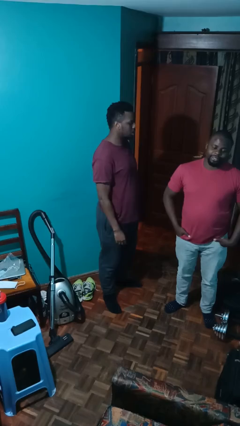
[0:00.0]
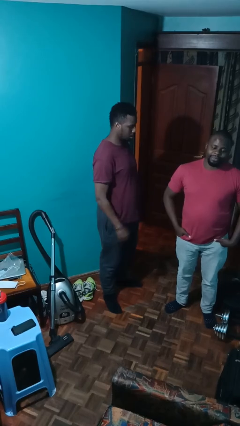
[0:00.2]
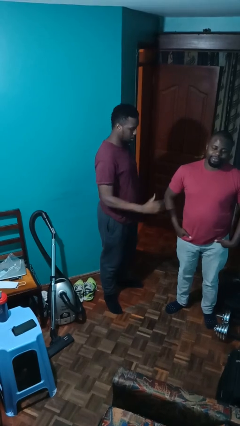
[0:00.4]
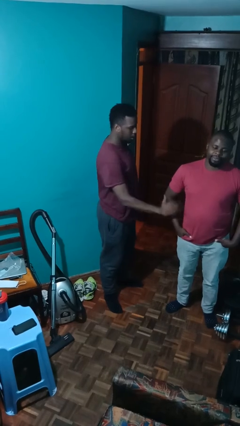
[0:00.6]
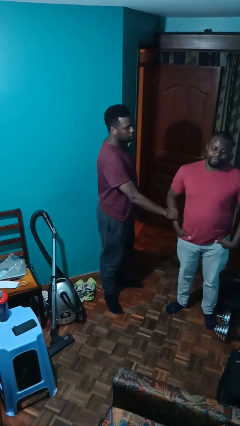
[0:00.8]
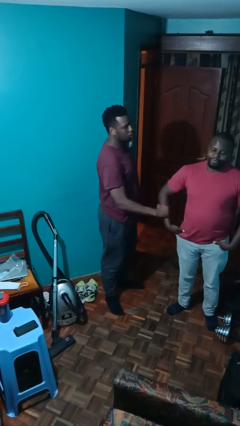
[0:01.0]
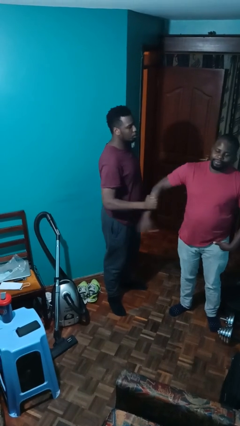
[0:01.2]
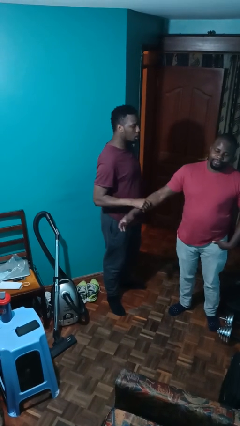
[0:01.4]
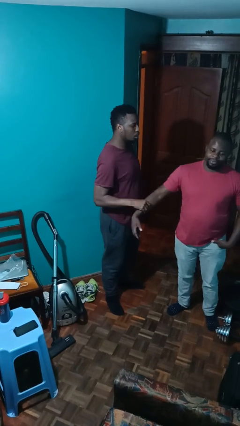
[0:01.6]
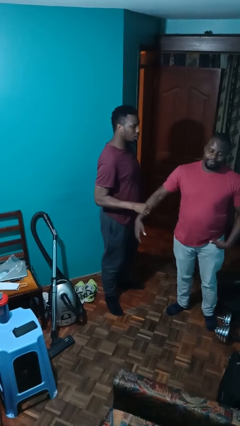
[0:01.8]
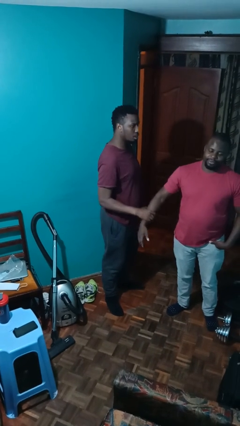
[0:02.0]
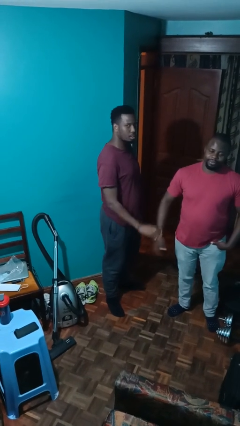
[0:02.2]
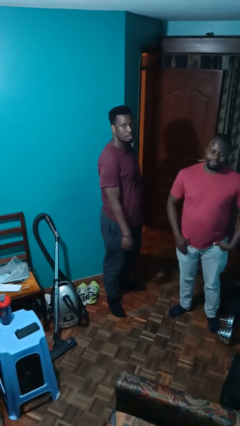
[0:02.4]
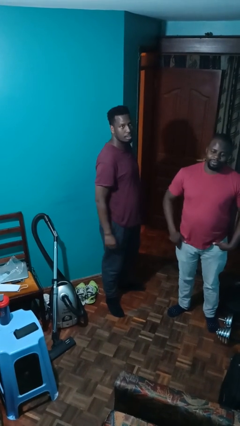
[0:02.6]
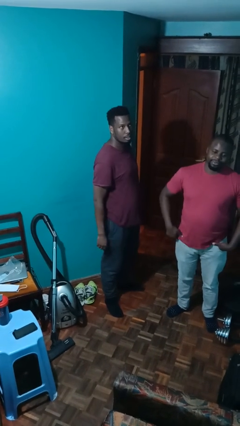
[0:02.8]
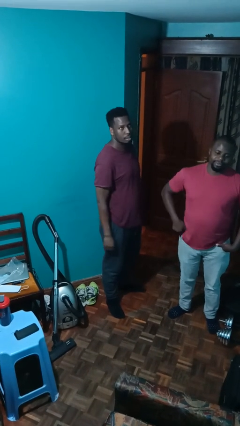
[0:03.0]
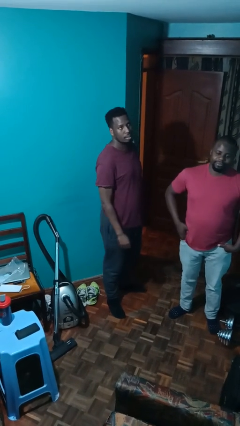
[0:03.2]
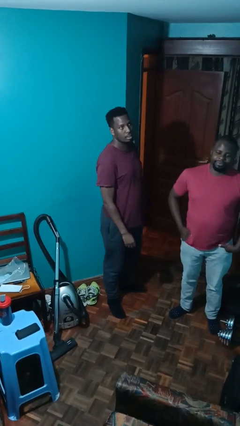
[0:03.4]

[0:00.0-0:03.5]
person grabs person by forearm

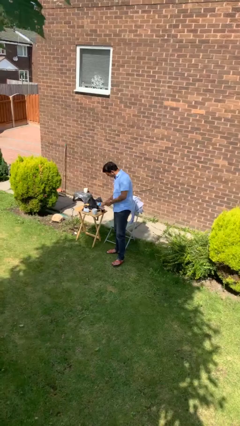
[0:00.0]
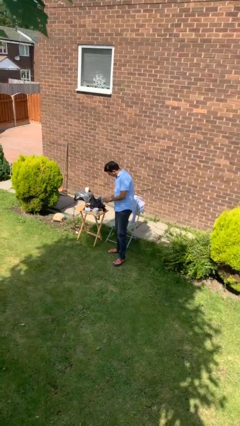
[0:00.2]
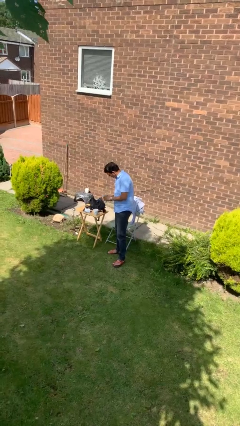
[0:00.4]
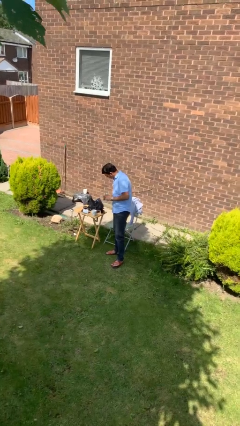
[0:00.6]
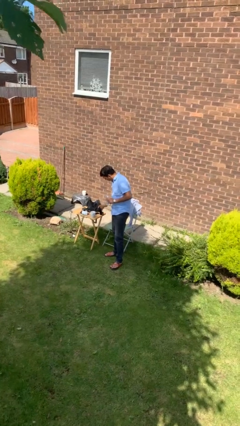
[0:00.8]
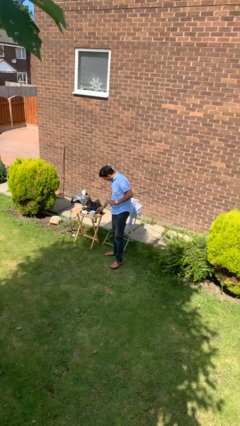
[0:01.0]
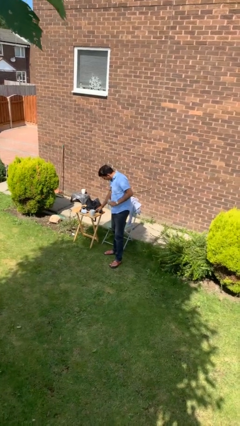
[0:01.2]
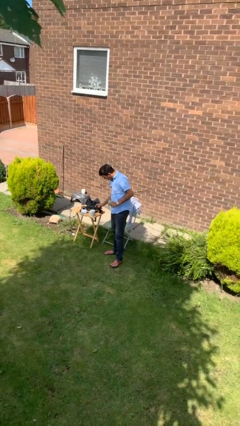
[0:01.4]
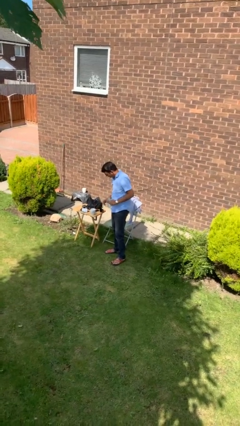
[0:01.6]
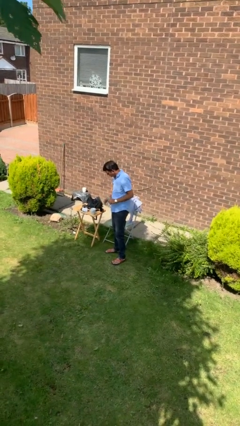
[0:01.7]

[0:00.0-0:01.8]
person screws lid to bottle

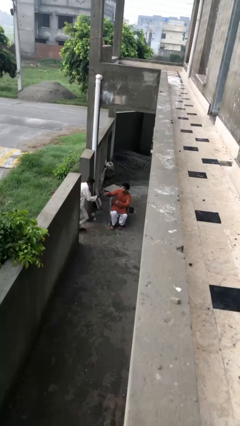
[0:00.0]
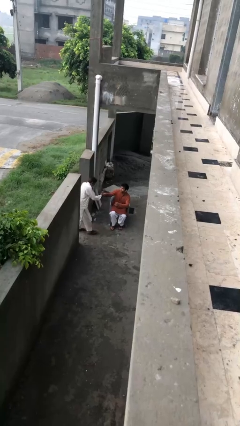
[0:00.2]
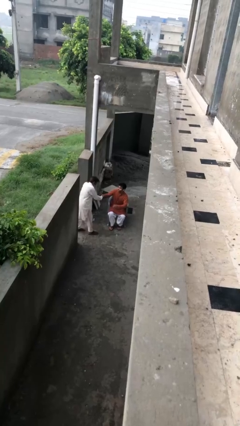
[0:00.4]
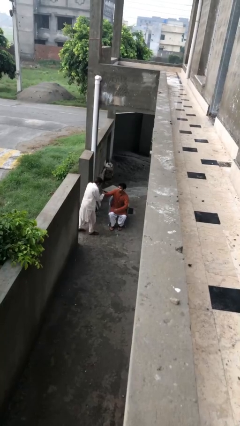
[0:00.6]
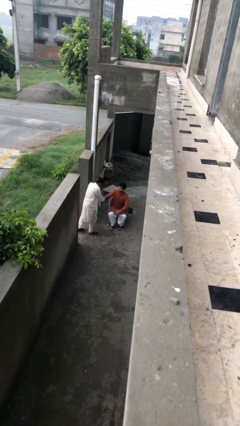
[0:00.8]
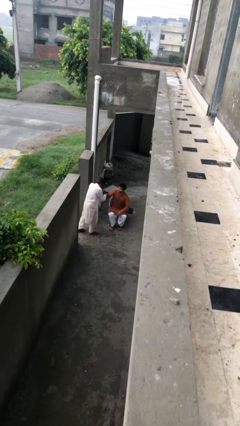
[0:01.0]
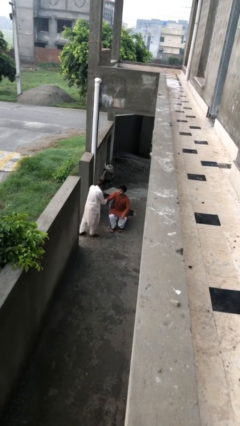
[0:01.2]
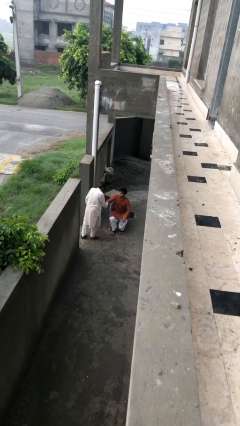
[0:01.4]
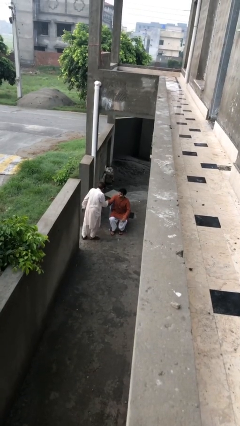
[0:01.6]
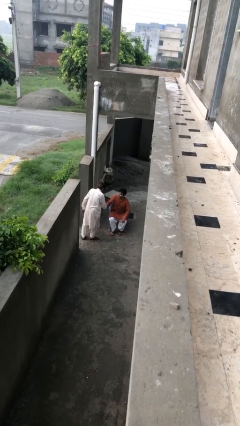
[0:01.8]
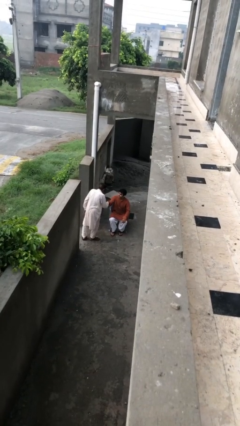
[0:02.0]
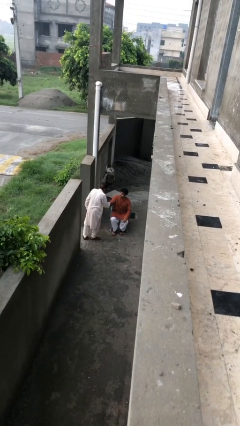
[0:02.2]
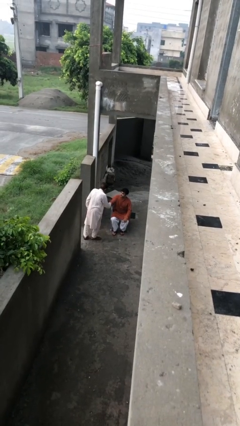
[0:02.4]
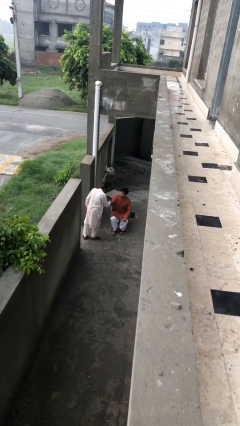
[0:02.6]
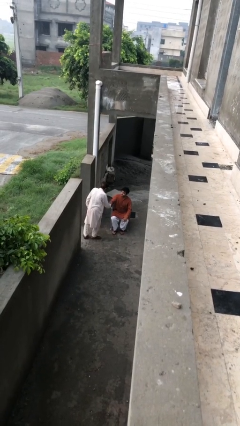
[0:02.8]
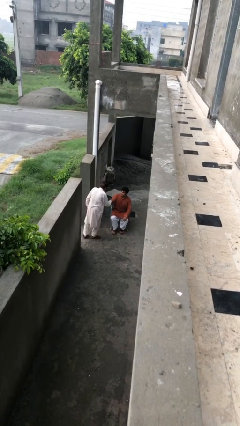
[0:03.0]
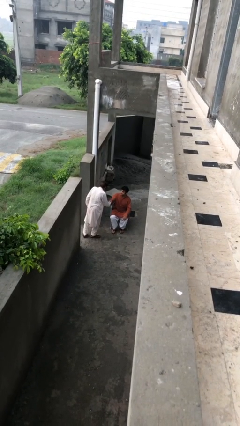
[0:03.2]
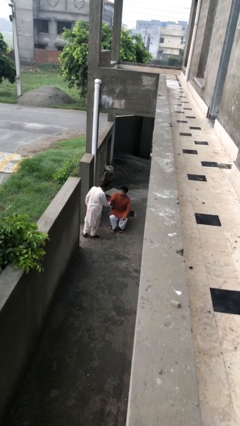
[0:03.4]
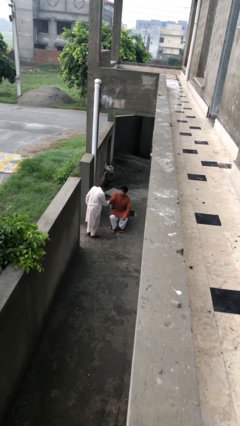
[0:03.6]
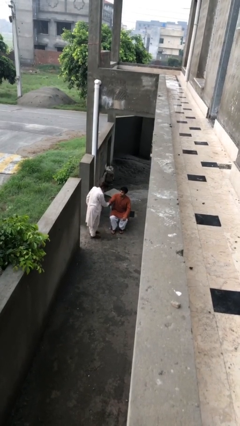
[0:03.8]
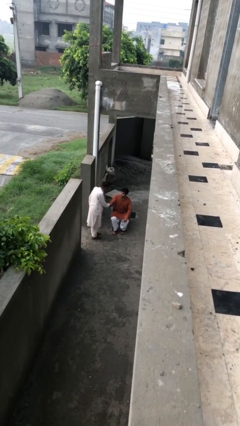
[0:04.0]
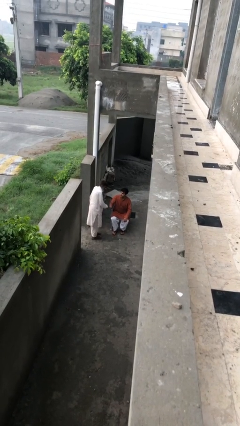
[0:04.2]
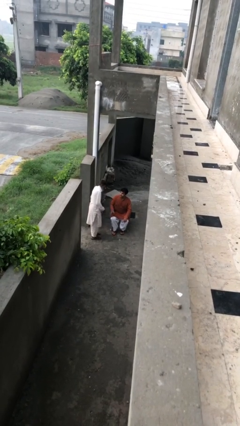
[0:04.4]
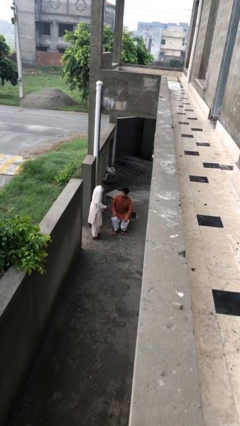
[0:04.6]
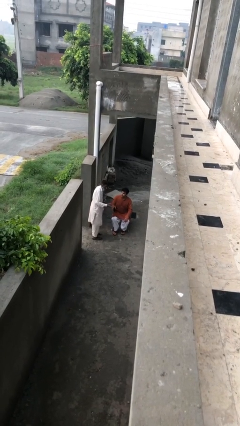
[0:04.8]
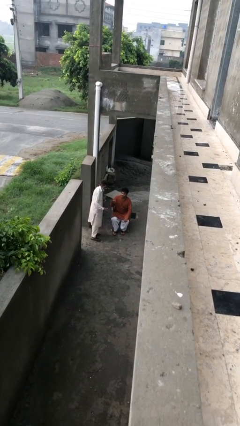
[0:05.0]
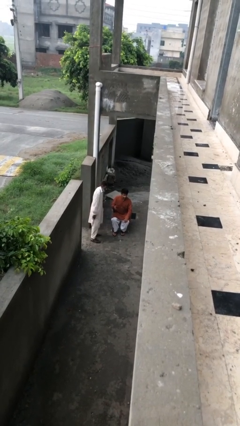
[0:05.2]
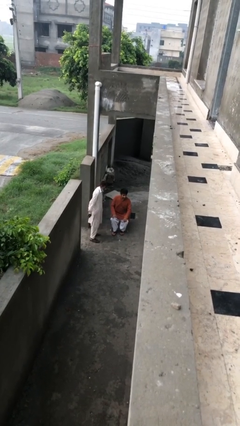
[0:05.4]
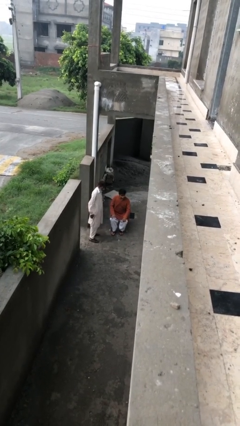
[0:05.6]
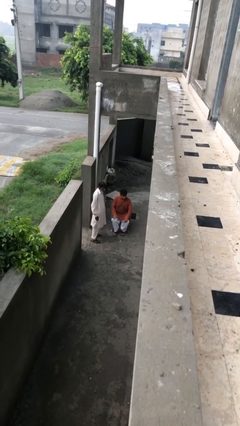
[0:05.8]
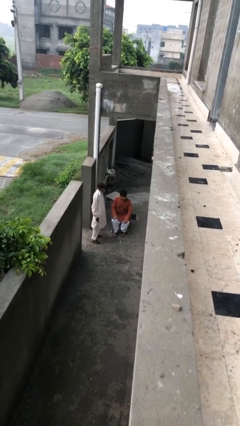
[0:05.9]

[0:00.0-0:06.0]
person shakes hand

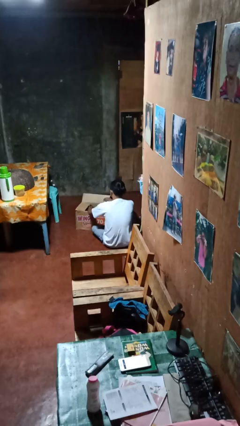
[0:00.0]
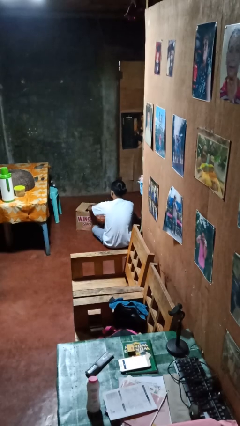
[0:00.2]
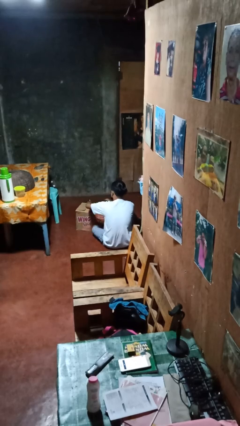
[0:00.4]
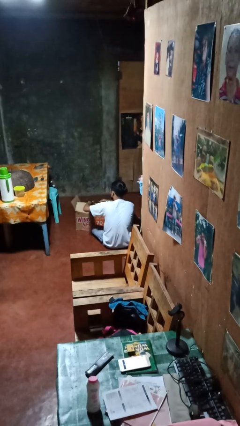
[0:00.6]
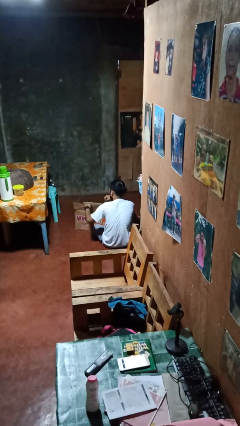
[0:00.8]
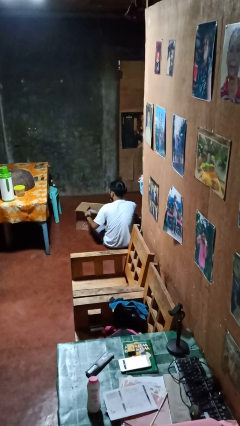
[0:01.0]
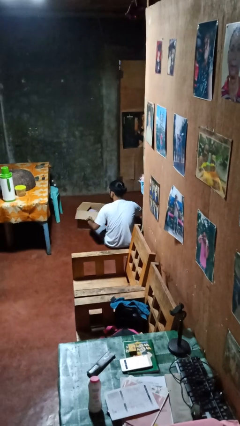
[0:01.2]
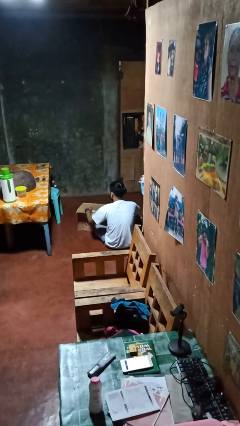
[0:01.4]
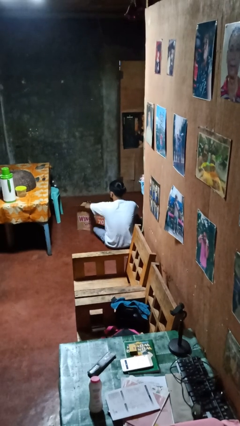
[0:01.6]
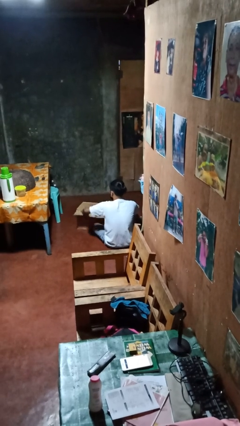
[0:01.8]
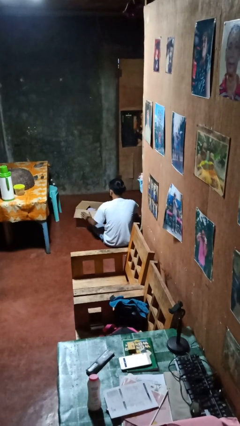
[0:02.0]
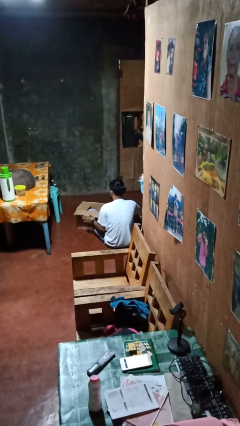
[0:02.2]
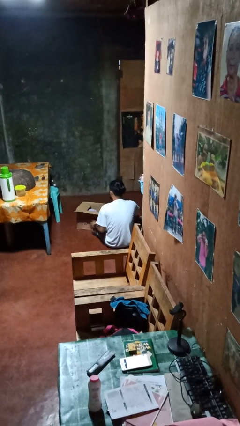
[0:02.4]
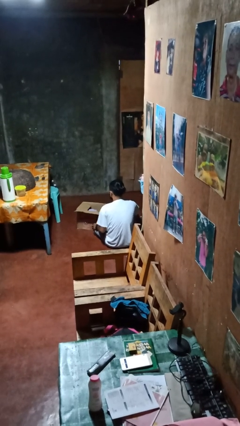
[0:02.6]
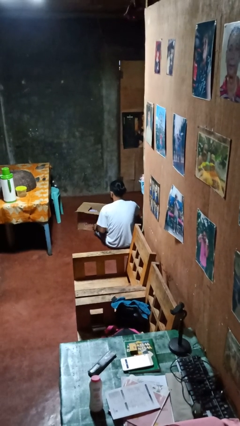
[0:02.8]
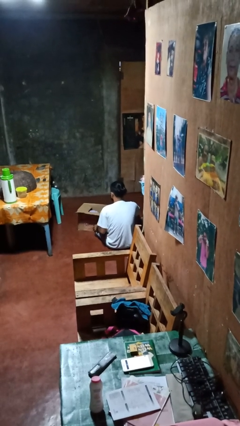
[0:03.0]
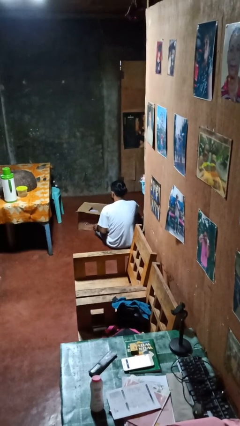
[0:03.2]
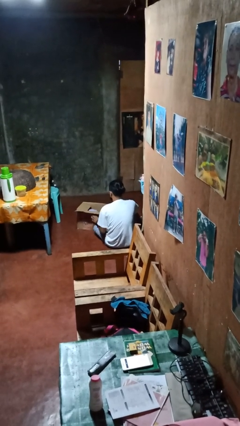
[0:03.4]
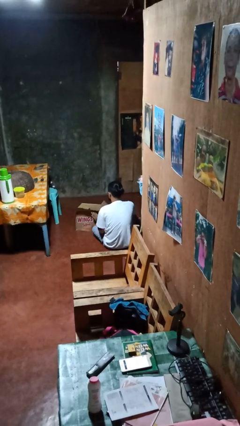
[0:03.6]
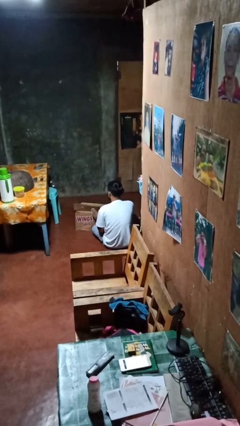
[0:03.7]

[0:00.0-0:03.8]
person opens box

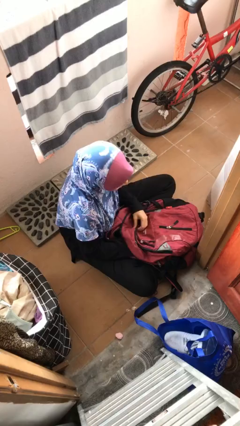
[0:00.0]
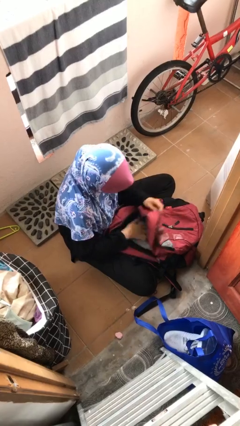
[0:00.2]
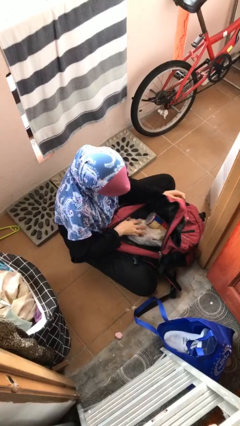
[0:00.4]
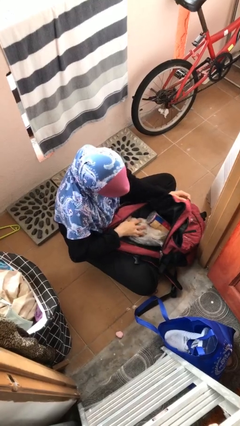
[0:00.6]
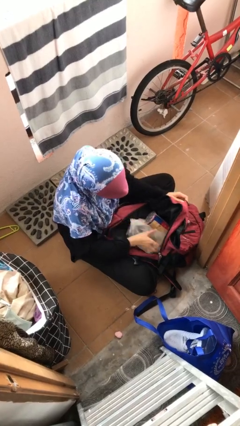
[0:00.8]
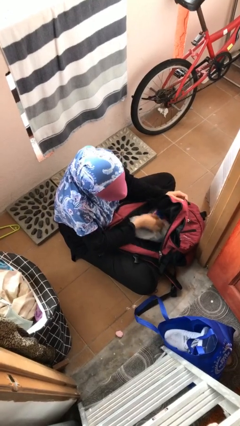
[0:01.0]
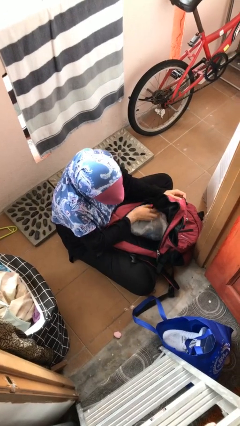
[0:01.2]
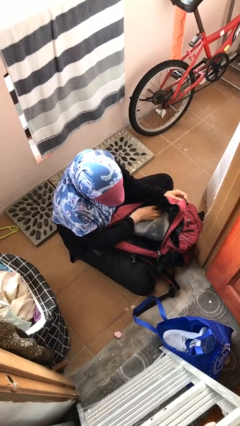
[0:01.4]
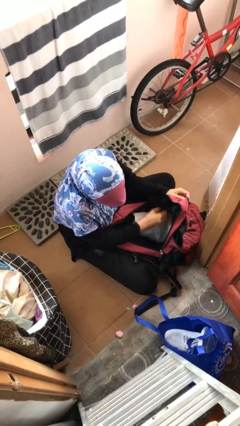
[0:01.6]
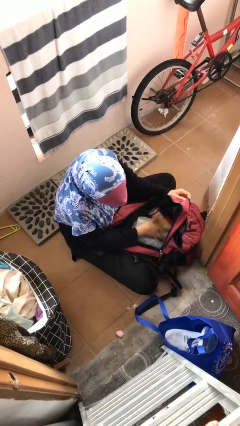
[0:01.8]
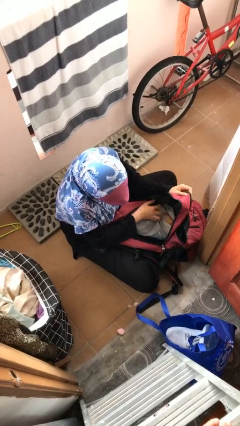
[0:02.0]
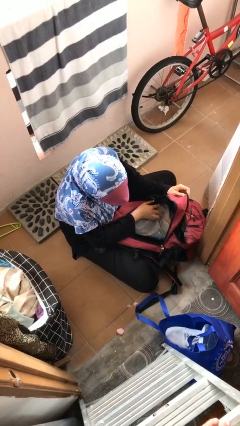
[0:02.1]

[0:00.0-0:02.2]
person searches in backpack
